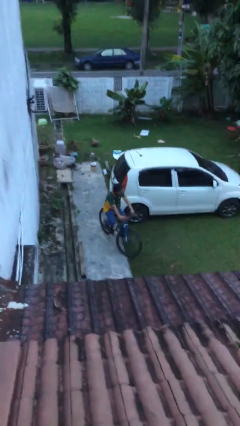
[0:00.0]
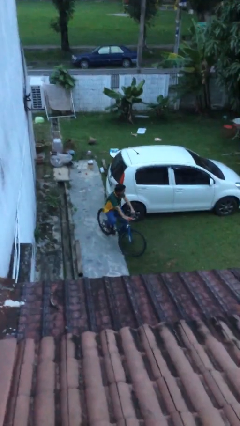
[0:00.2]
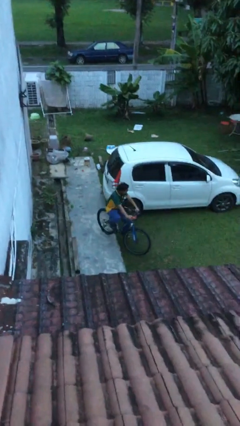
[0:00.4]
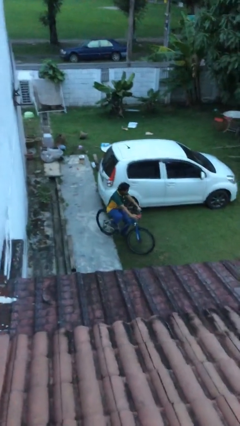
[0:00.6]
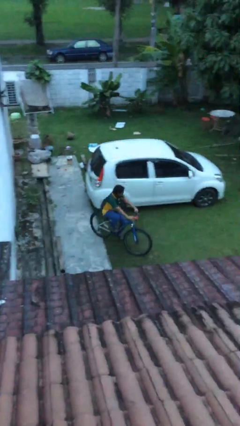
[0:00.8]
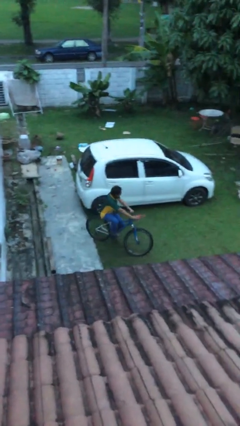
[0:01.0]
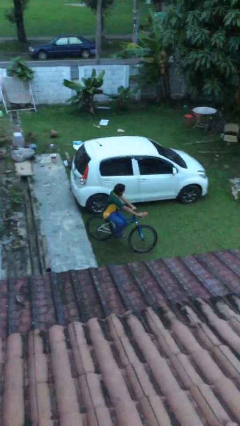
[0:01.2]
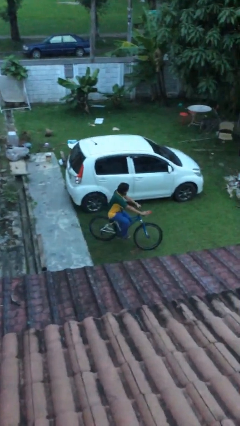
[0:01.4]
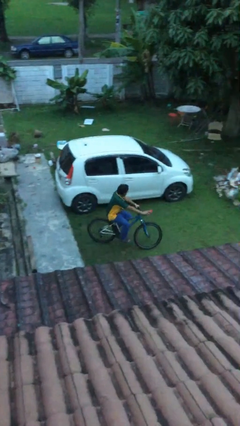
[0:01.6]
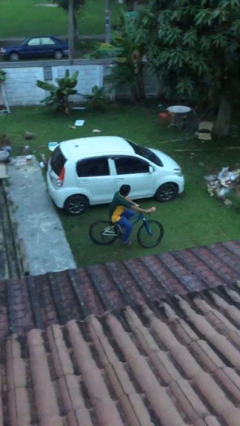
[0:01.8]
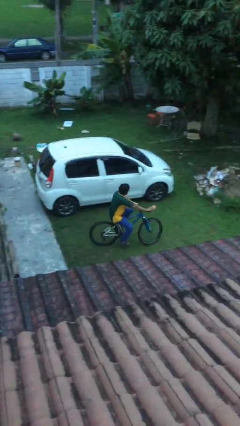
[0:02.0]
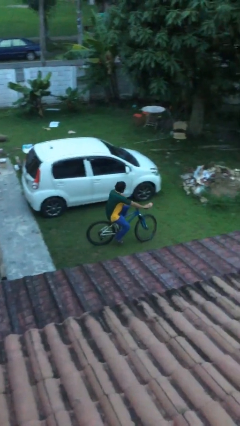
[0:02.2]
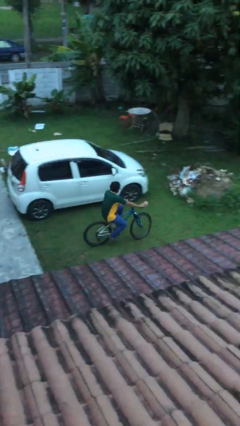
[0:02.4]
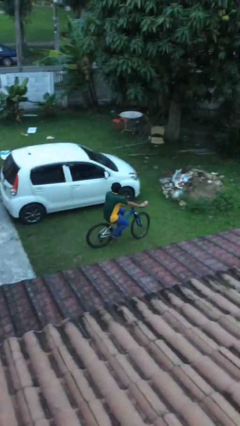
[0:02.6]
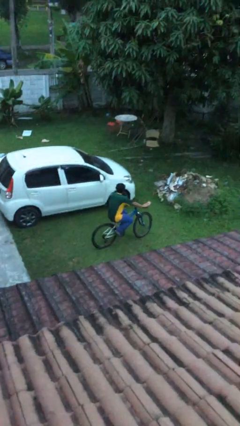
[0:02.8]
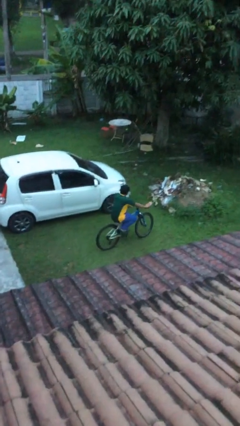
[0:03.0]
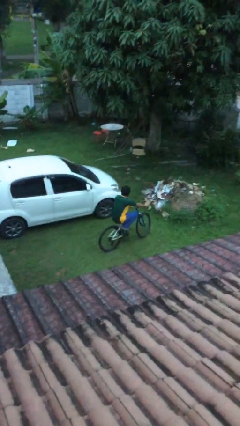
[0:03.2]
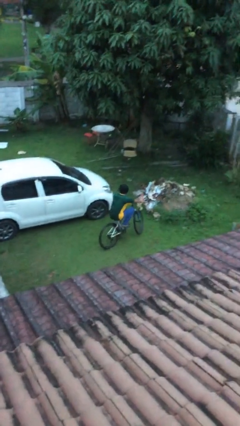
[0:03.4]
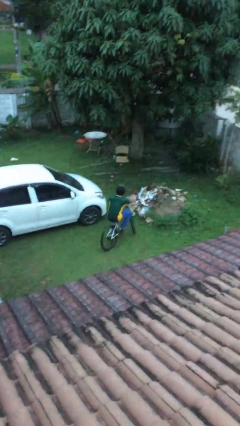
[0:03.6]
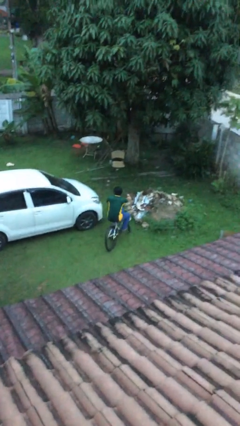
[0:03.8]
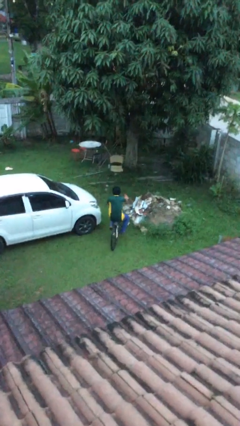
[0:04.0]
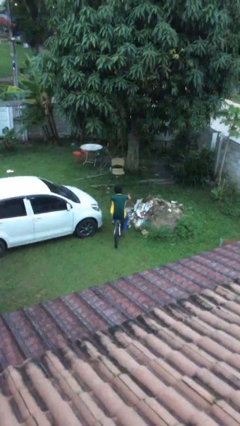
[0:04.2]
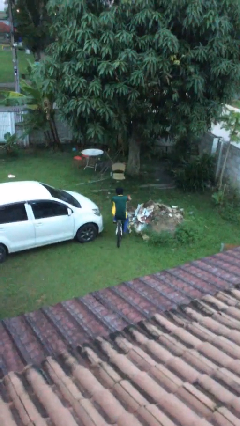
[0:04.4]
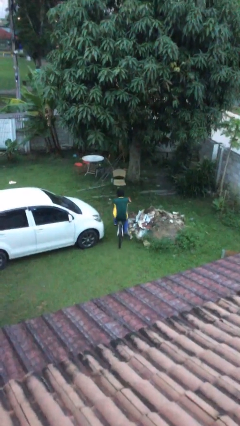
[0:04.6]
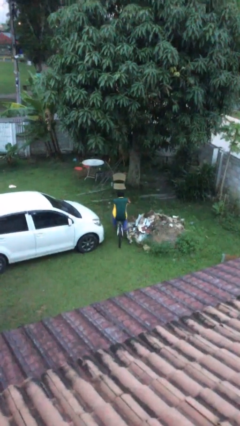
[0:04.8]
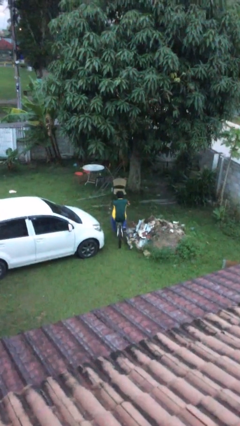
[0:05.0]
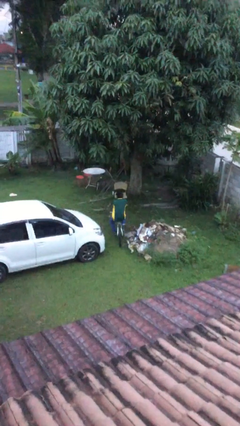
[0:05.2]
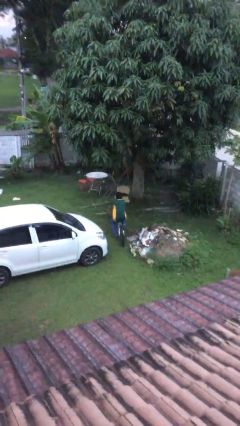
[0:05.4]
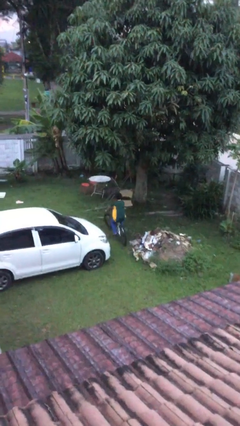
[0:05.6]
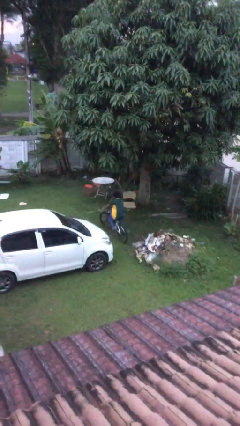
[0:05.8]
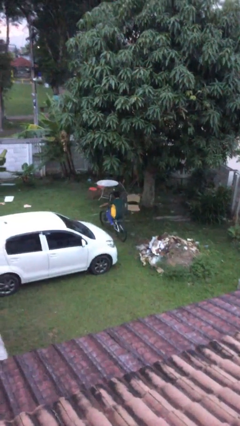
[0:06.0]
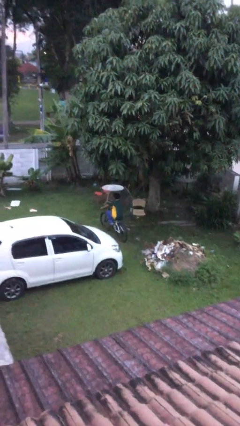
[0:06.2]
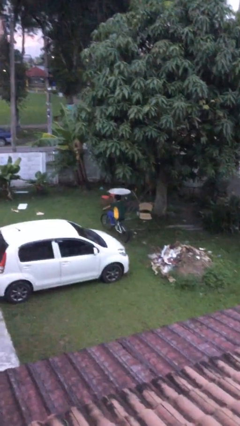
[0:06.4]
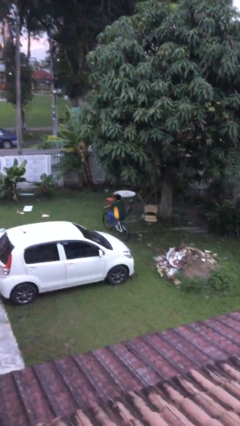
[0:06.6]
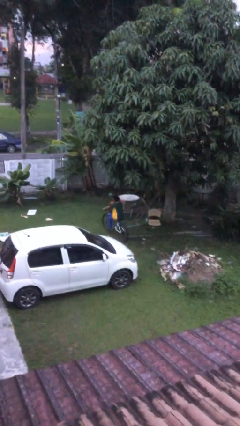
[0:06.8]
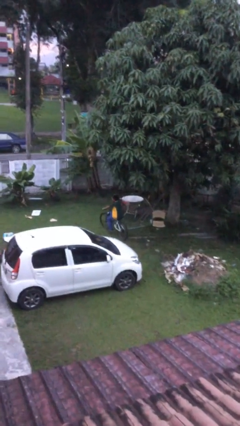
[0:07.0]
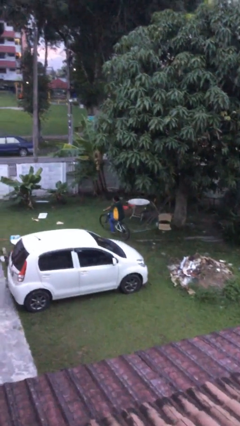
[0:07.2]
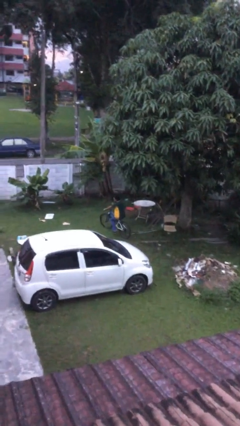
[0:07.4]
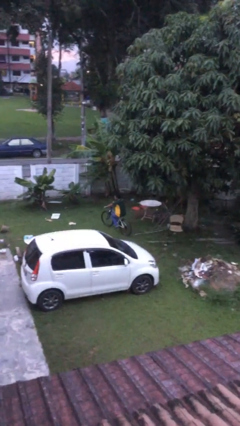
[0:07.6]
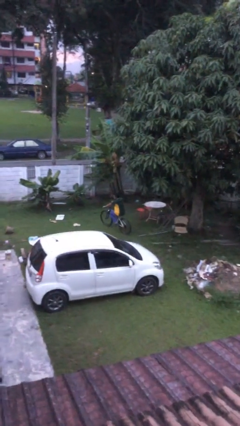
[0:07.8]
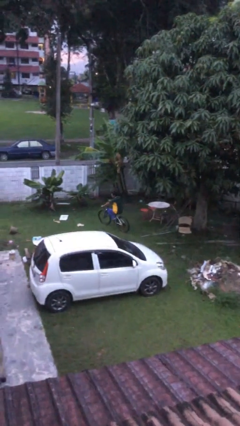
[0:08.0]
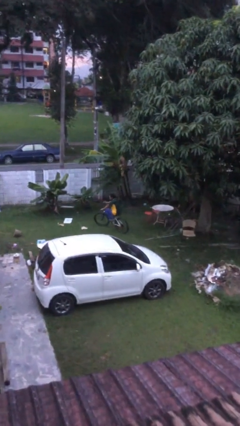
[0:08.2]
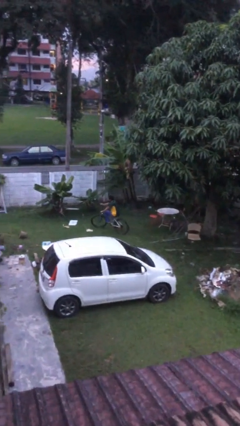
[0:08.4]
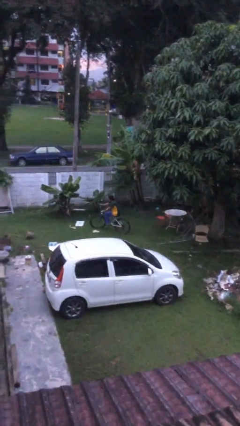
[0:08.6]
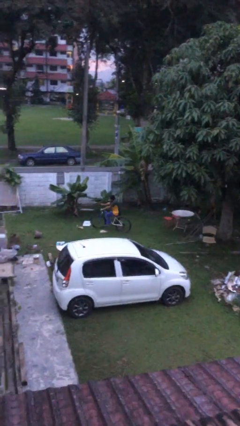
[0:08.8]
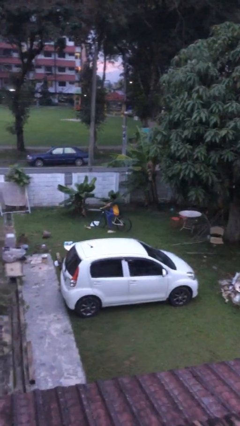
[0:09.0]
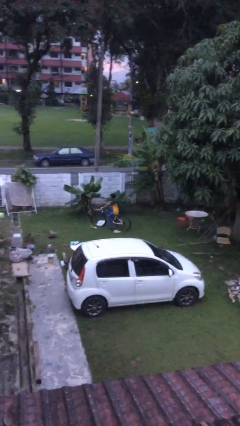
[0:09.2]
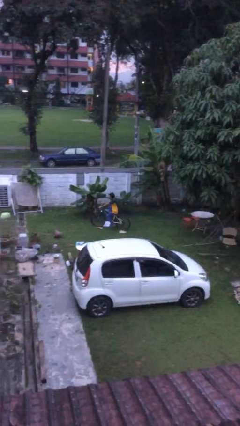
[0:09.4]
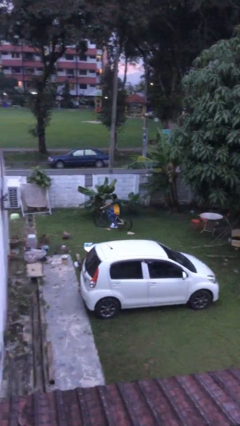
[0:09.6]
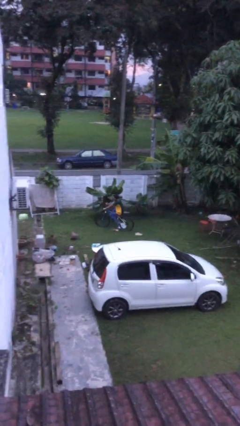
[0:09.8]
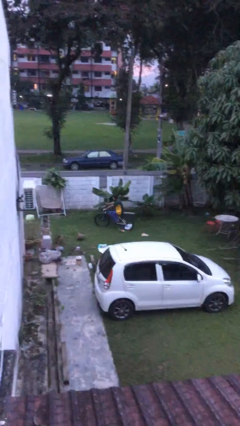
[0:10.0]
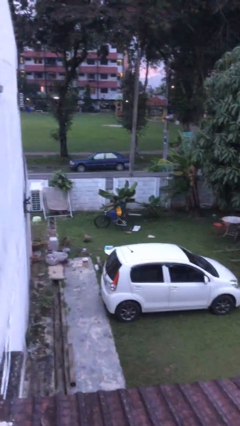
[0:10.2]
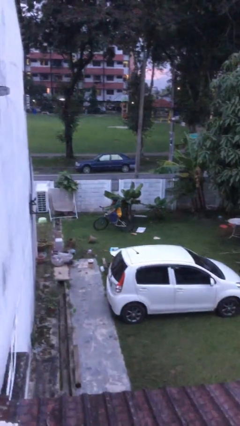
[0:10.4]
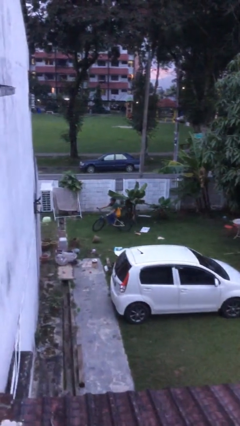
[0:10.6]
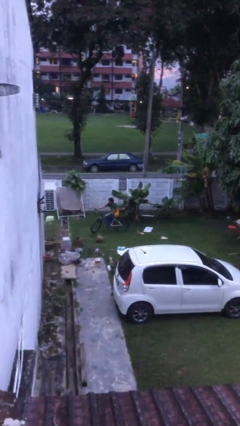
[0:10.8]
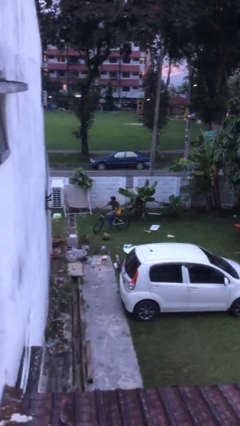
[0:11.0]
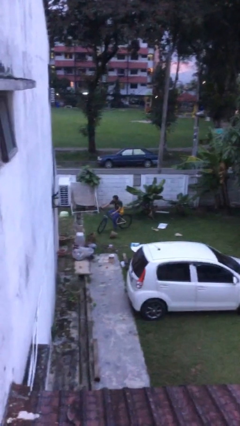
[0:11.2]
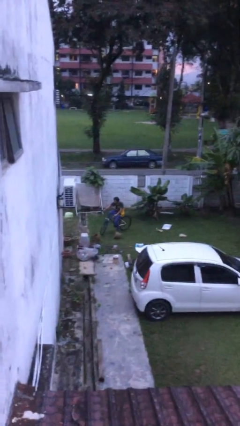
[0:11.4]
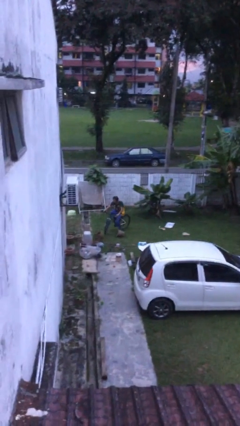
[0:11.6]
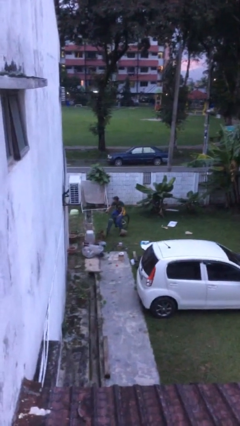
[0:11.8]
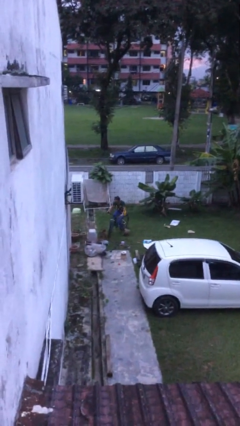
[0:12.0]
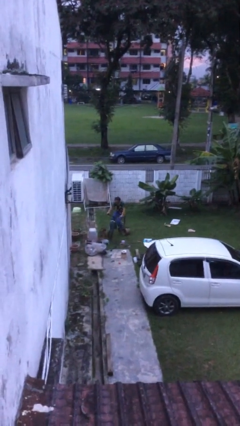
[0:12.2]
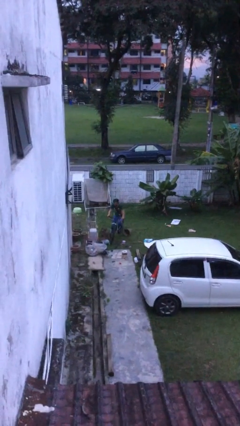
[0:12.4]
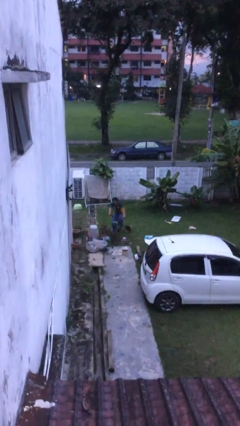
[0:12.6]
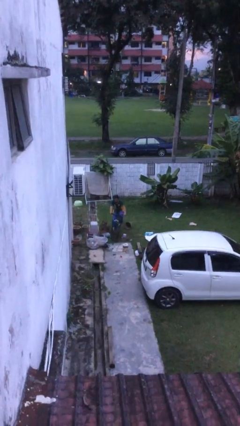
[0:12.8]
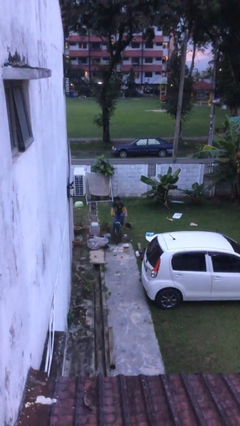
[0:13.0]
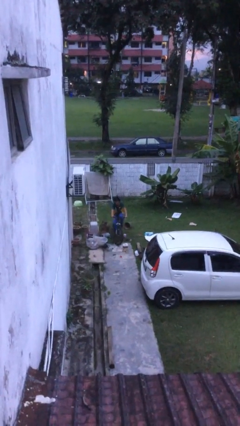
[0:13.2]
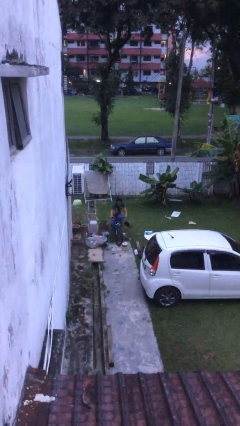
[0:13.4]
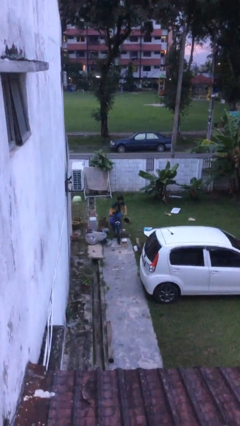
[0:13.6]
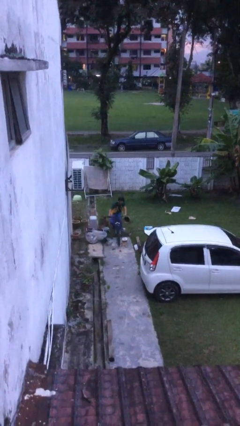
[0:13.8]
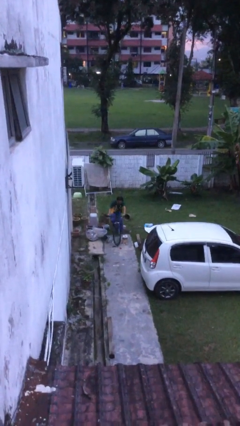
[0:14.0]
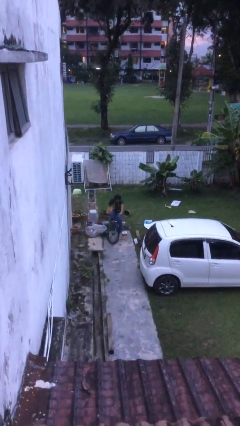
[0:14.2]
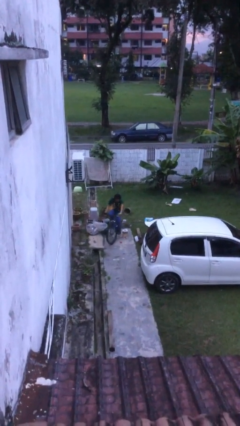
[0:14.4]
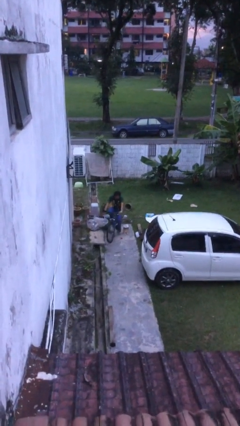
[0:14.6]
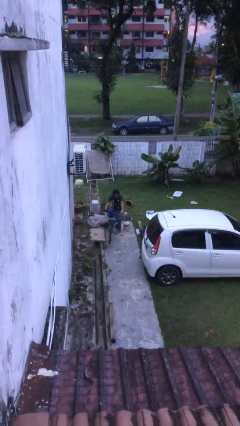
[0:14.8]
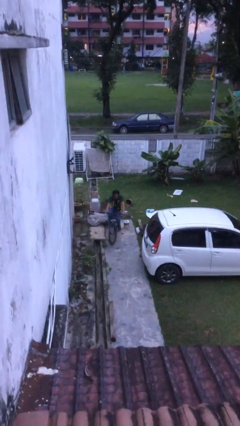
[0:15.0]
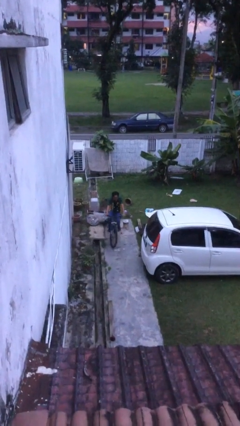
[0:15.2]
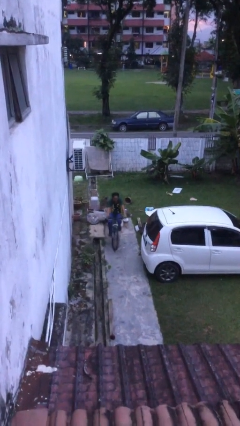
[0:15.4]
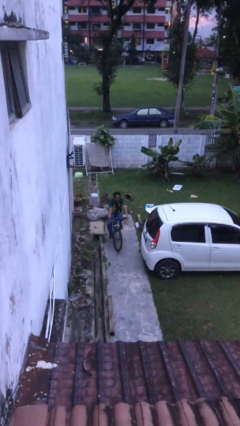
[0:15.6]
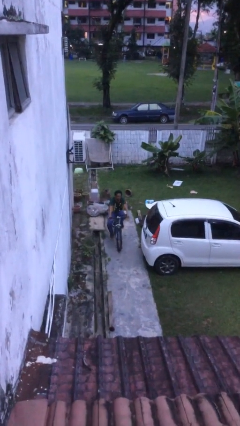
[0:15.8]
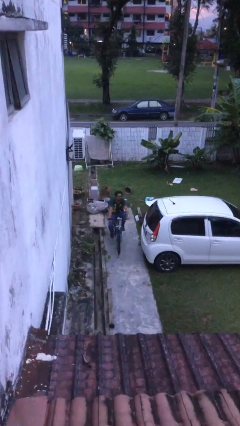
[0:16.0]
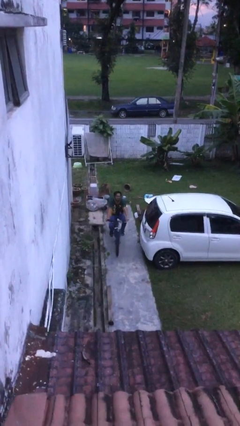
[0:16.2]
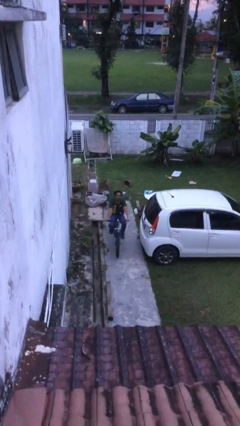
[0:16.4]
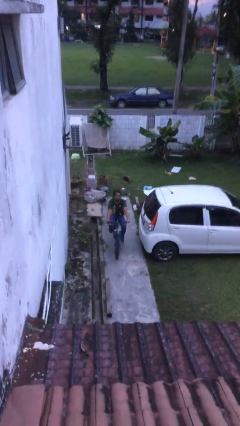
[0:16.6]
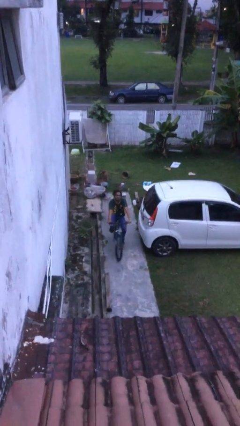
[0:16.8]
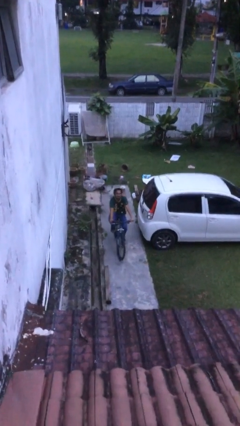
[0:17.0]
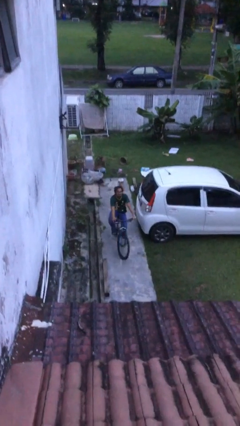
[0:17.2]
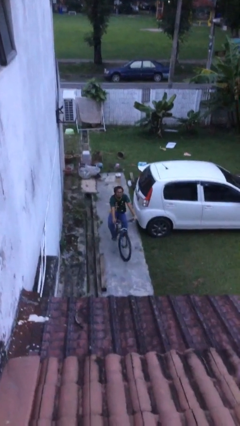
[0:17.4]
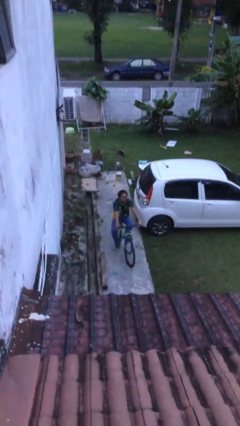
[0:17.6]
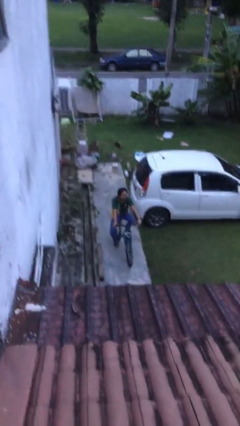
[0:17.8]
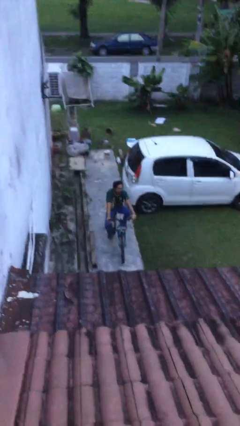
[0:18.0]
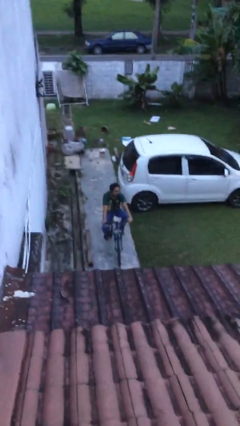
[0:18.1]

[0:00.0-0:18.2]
person rides bicycle

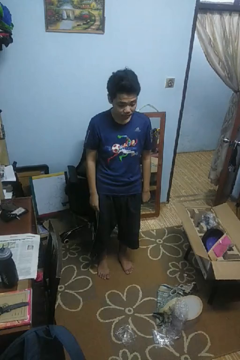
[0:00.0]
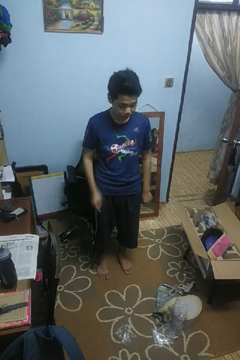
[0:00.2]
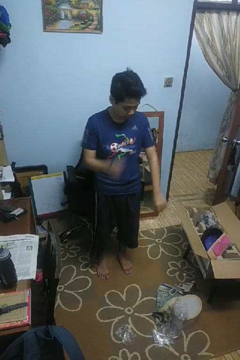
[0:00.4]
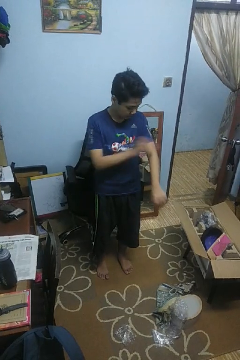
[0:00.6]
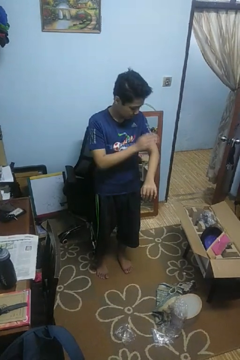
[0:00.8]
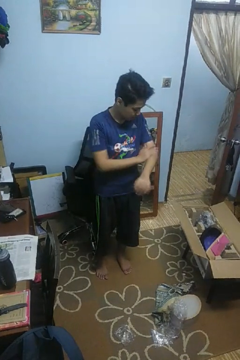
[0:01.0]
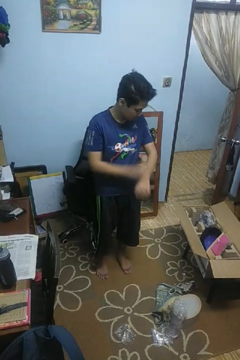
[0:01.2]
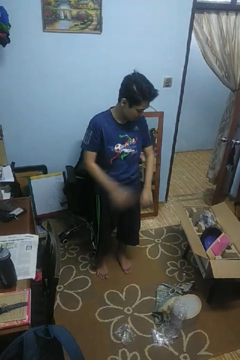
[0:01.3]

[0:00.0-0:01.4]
person swats bug
